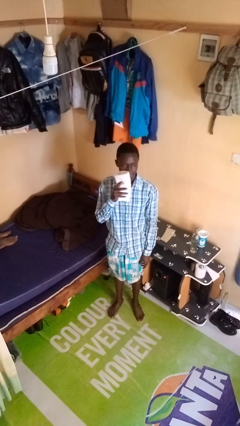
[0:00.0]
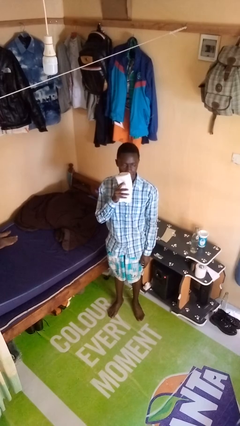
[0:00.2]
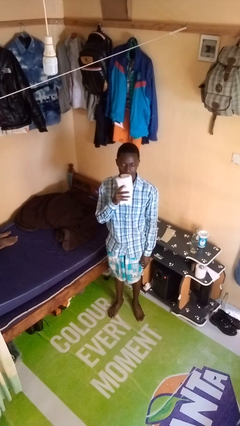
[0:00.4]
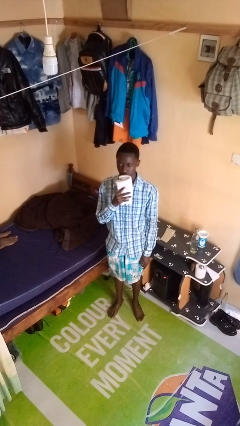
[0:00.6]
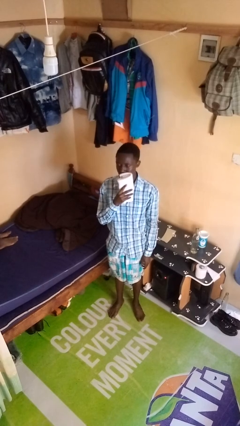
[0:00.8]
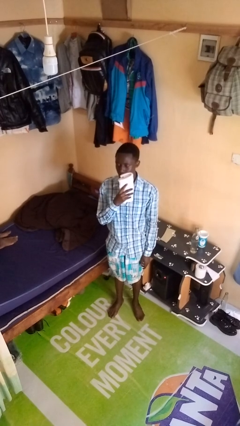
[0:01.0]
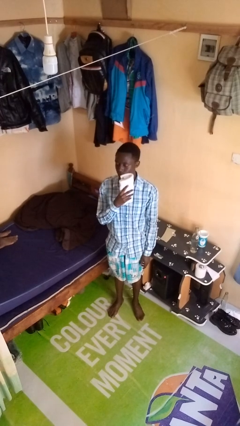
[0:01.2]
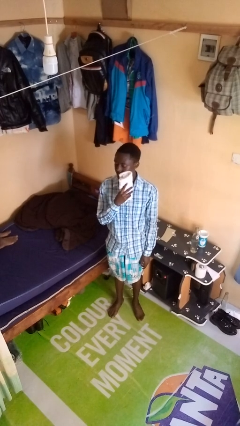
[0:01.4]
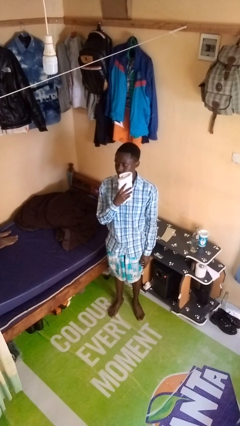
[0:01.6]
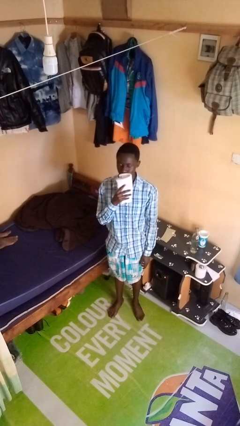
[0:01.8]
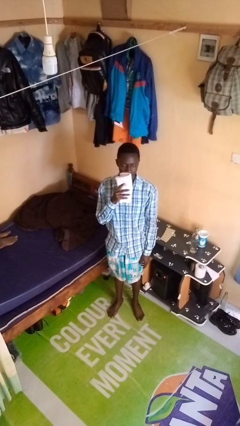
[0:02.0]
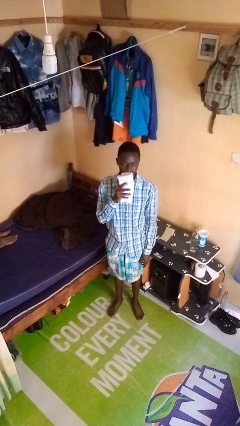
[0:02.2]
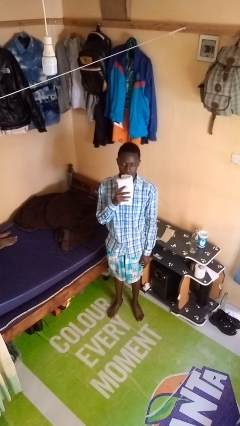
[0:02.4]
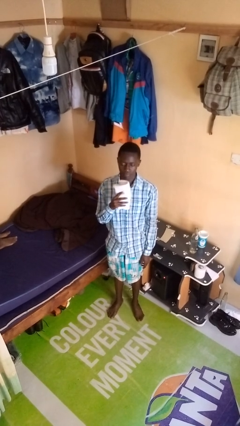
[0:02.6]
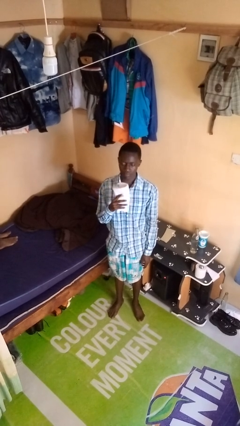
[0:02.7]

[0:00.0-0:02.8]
person wipes mouth with napkin

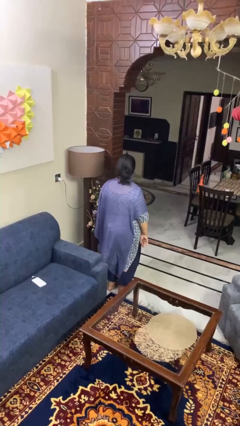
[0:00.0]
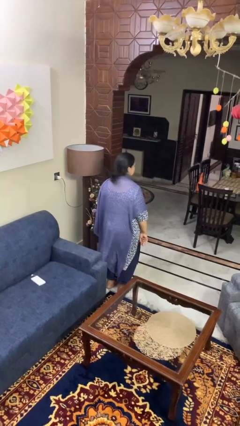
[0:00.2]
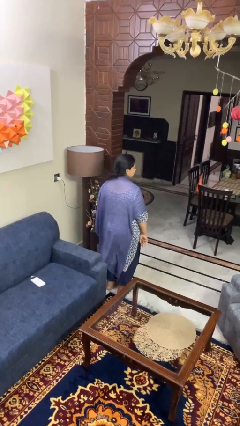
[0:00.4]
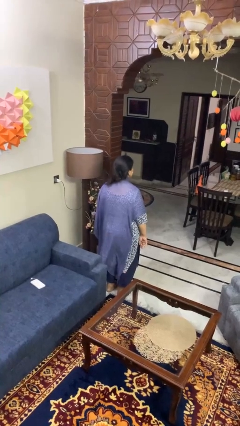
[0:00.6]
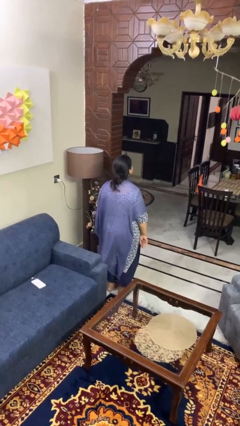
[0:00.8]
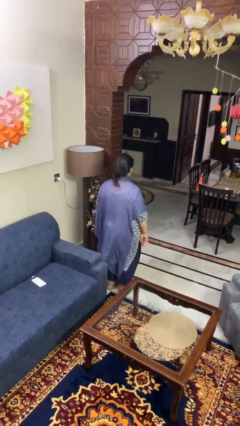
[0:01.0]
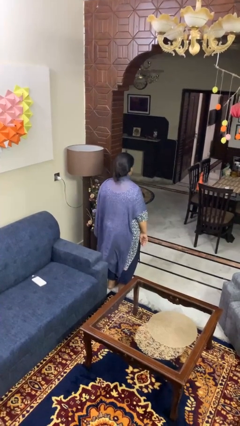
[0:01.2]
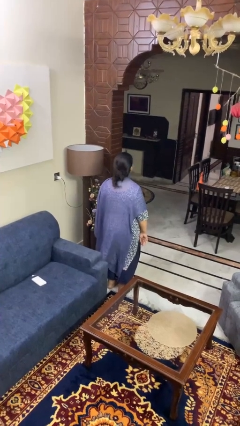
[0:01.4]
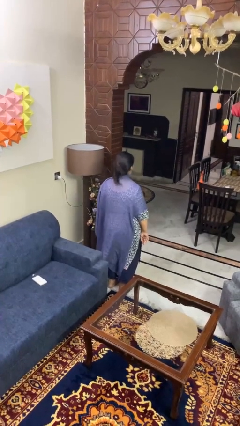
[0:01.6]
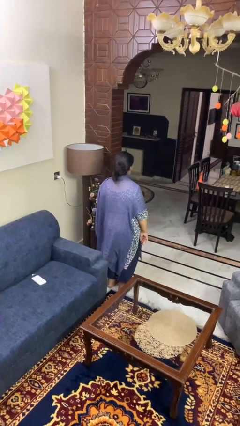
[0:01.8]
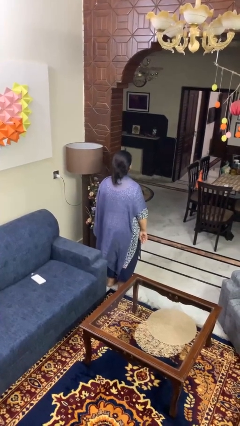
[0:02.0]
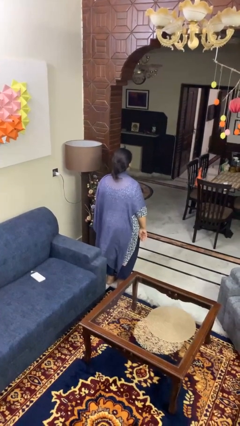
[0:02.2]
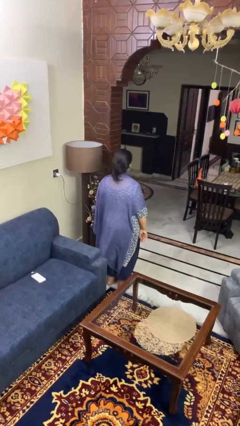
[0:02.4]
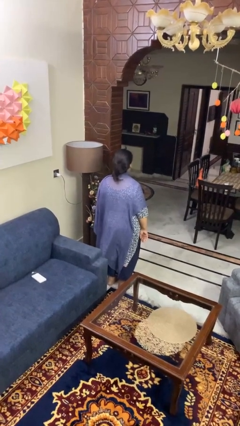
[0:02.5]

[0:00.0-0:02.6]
person nods head

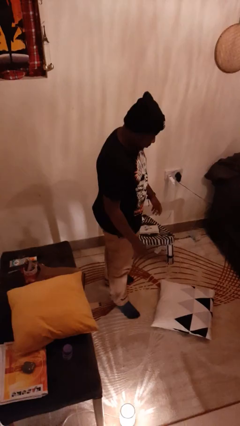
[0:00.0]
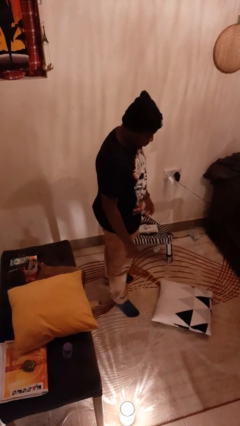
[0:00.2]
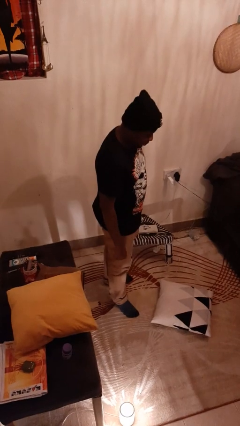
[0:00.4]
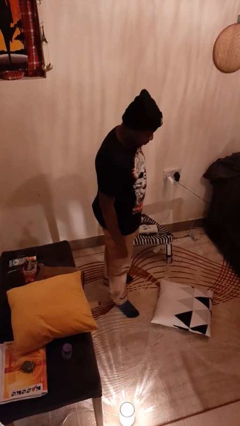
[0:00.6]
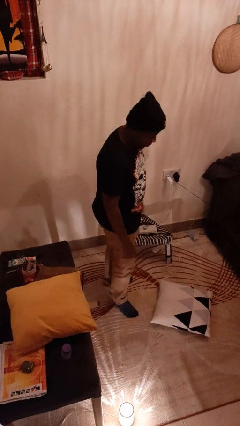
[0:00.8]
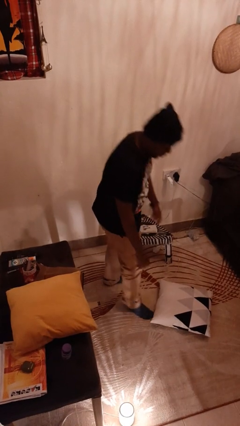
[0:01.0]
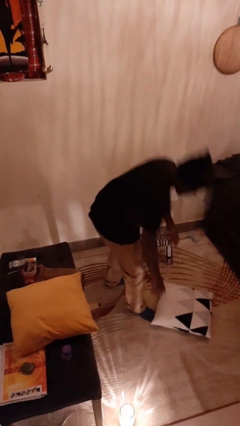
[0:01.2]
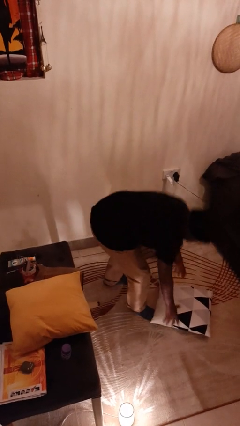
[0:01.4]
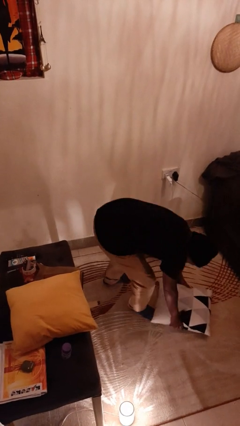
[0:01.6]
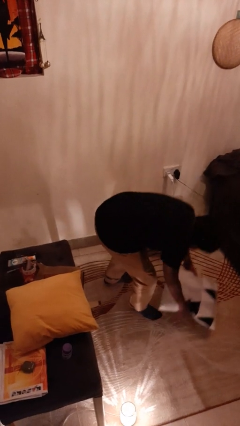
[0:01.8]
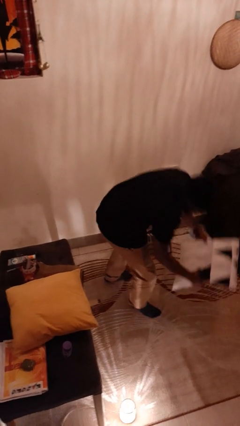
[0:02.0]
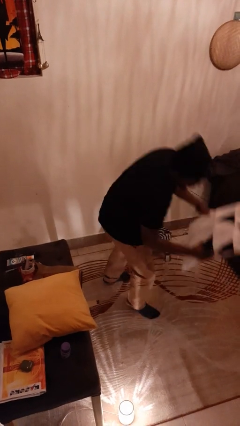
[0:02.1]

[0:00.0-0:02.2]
person drops object

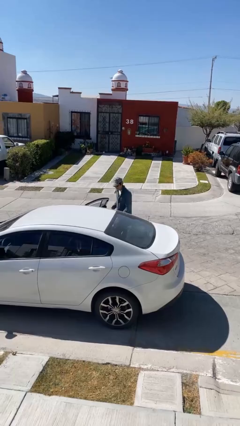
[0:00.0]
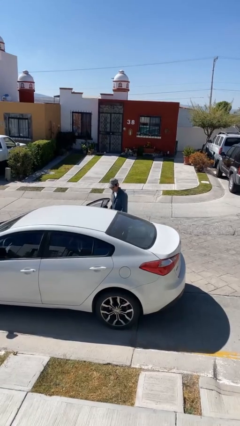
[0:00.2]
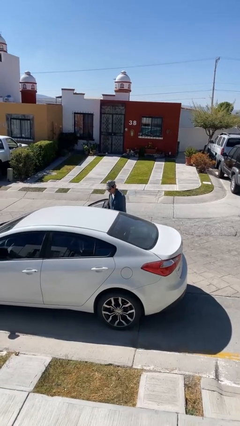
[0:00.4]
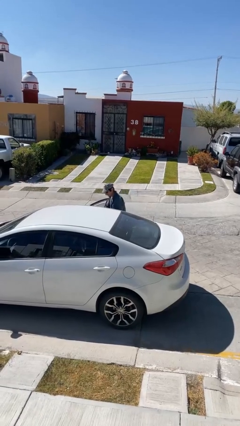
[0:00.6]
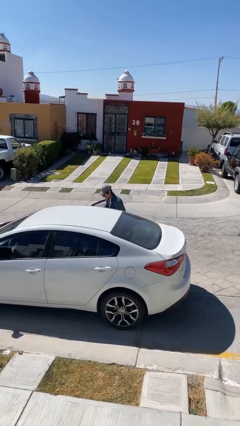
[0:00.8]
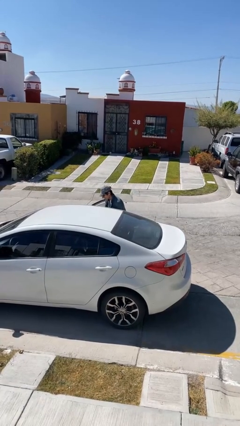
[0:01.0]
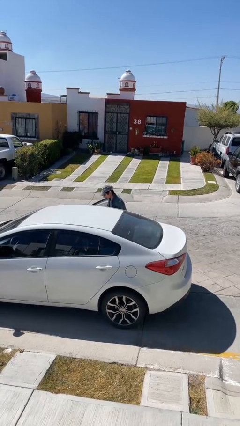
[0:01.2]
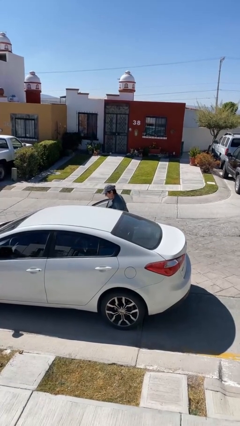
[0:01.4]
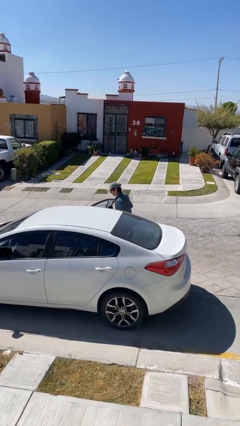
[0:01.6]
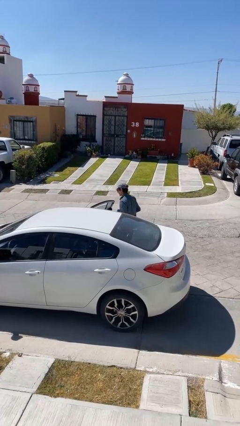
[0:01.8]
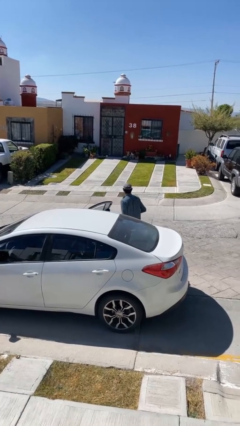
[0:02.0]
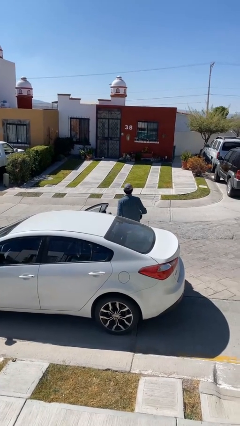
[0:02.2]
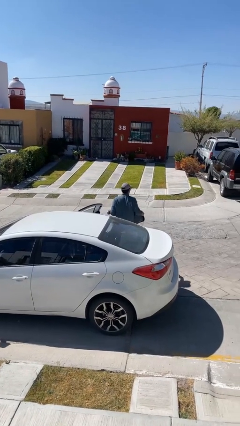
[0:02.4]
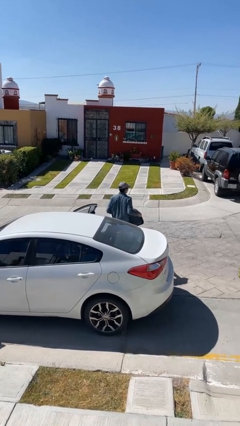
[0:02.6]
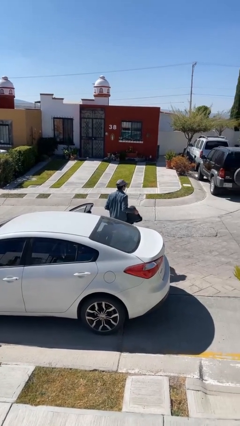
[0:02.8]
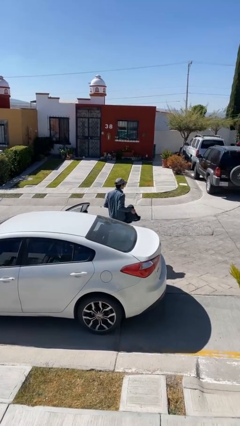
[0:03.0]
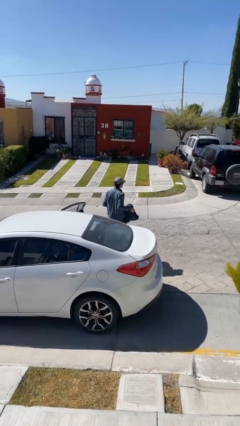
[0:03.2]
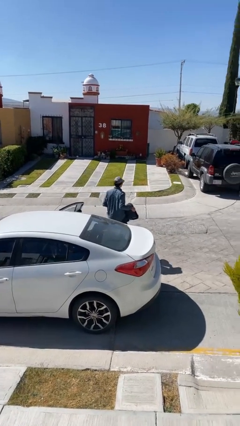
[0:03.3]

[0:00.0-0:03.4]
person unloads car

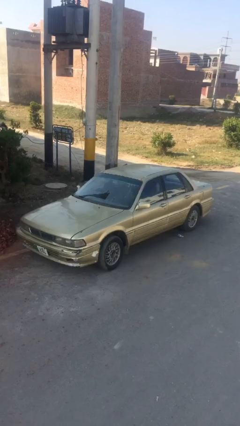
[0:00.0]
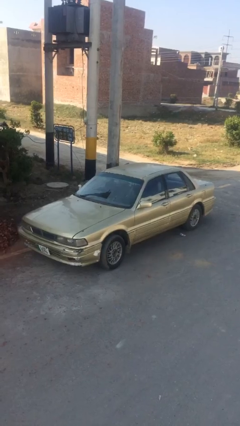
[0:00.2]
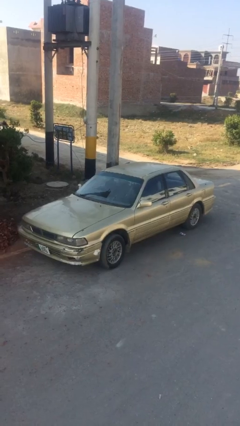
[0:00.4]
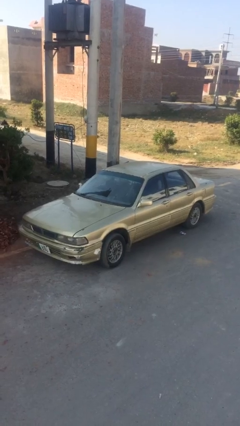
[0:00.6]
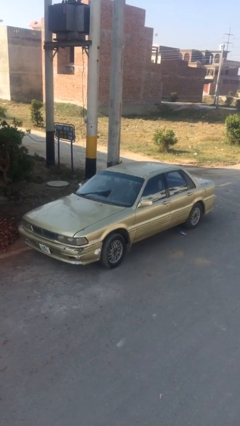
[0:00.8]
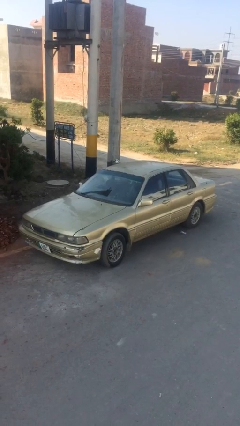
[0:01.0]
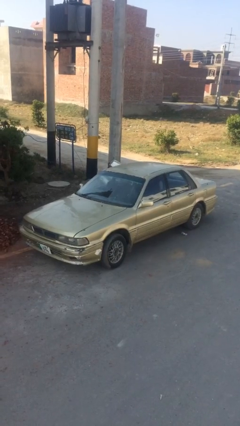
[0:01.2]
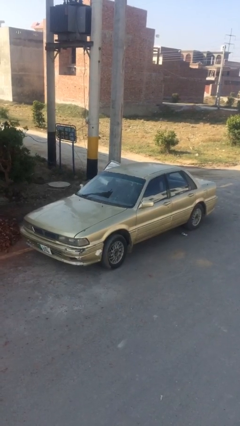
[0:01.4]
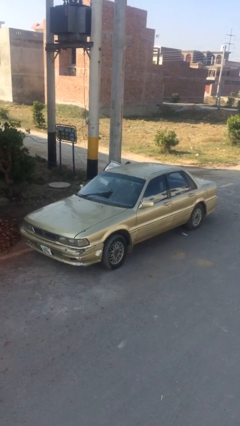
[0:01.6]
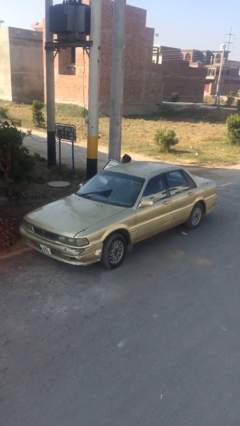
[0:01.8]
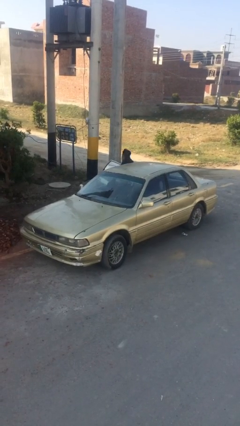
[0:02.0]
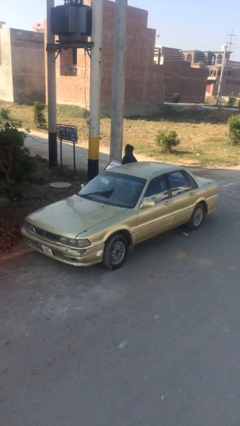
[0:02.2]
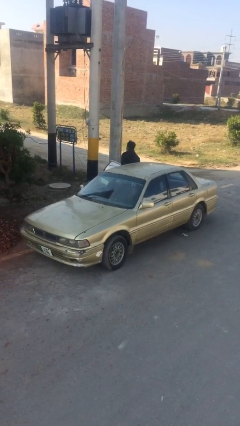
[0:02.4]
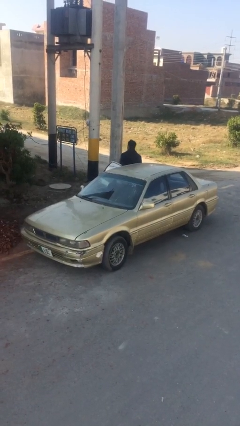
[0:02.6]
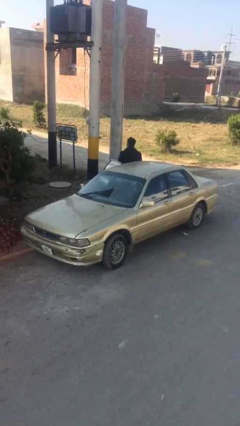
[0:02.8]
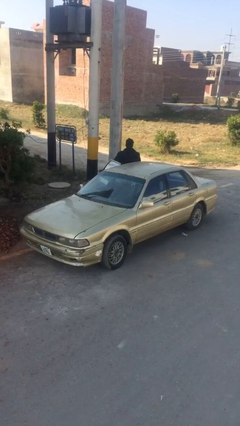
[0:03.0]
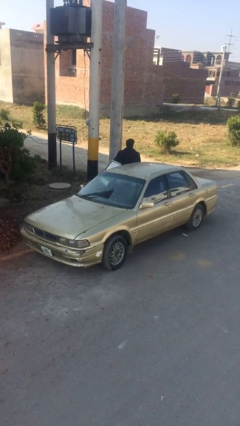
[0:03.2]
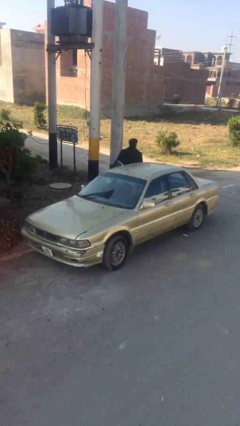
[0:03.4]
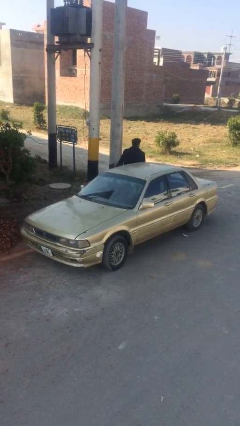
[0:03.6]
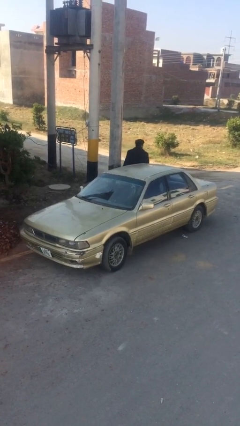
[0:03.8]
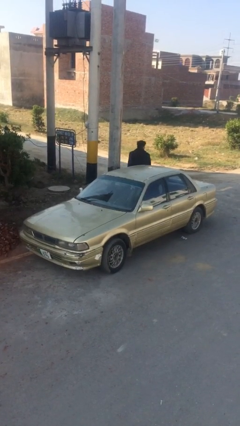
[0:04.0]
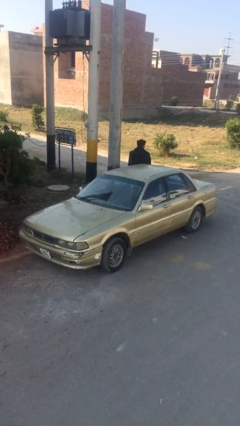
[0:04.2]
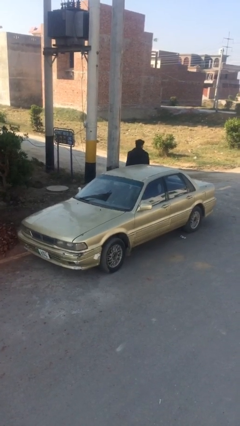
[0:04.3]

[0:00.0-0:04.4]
car drops off person

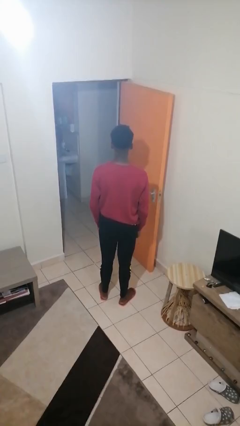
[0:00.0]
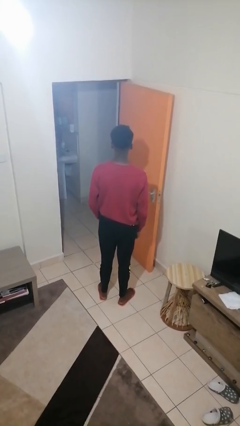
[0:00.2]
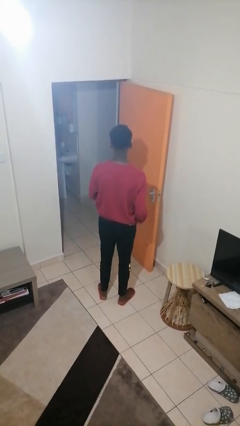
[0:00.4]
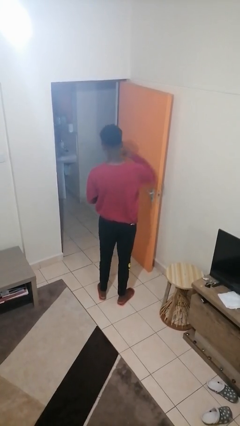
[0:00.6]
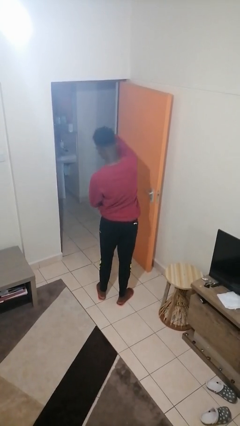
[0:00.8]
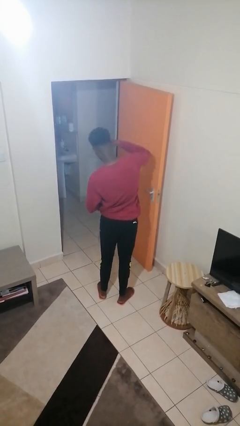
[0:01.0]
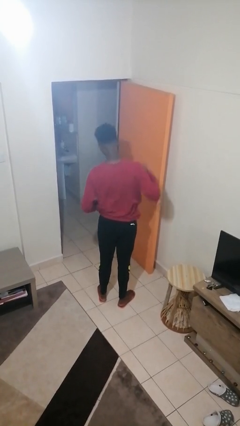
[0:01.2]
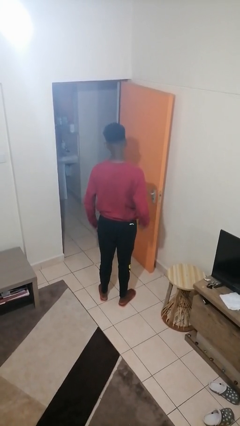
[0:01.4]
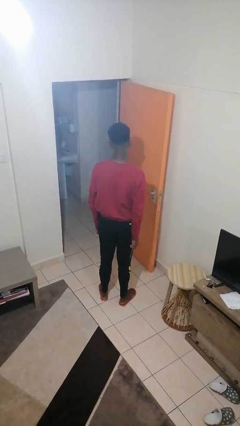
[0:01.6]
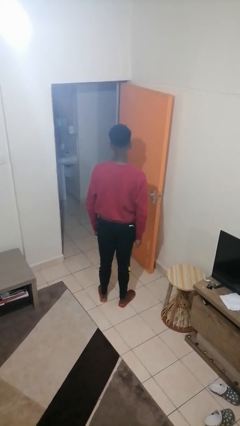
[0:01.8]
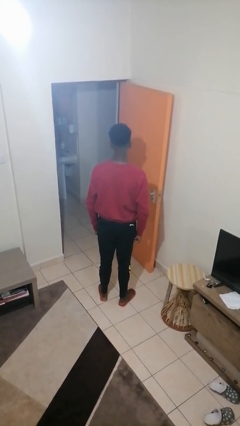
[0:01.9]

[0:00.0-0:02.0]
person punches
